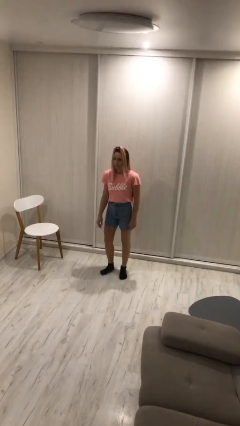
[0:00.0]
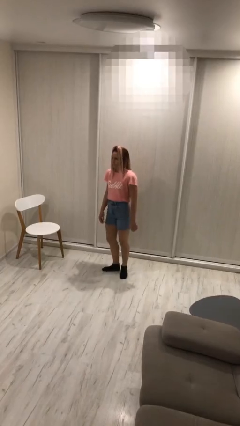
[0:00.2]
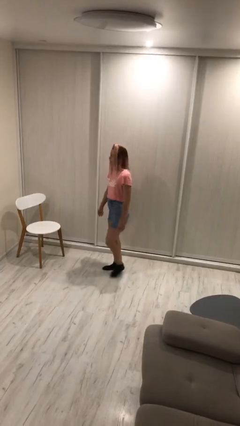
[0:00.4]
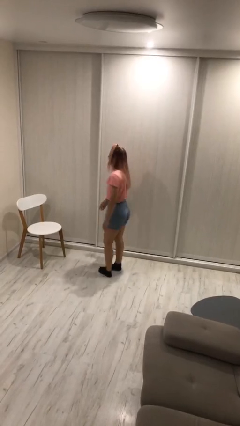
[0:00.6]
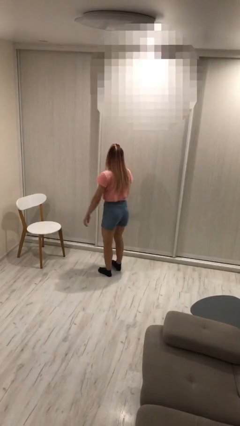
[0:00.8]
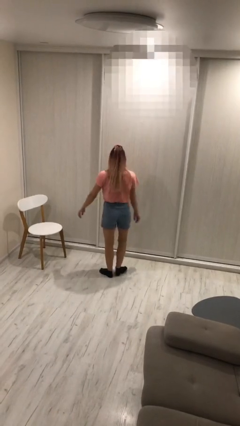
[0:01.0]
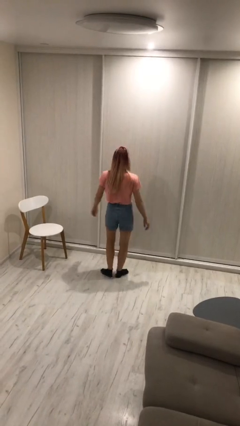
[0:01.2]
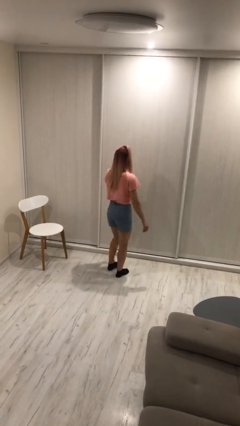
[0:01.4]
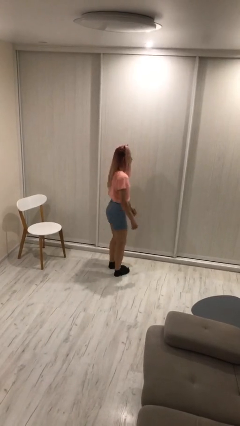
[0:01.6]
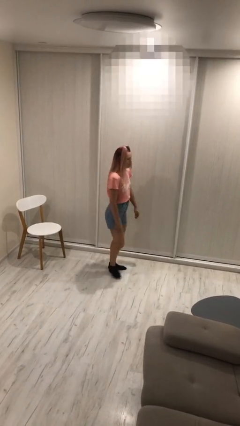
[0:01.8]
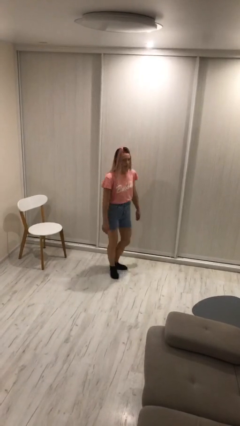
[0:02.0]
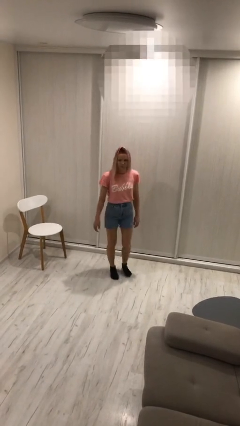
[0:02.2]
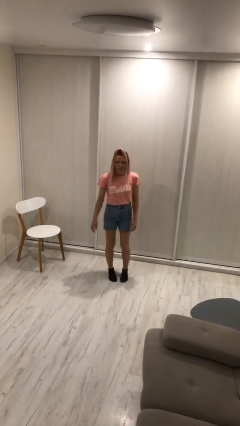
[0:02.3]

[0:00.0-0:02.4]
person twirls

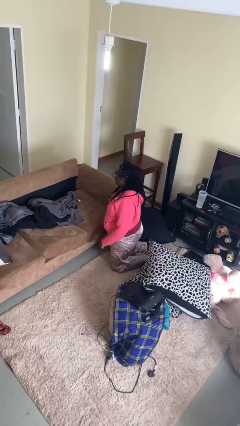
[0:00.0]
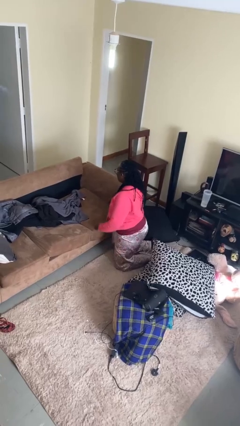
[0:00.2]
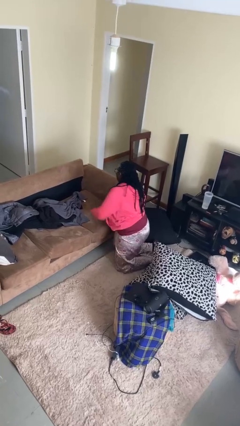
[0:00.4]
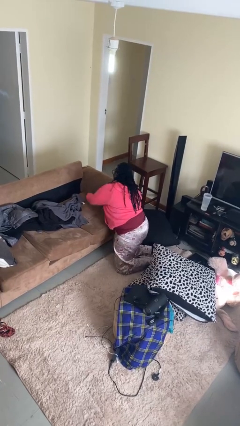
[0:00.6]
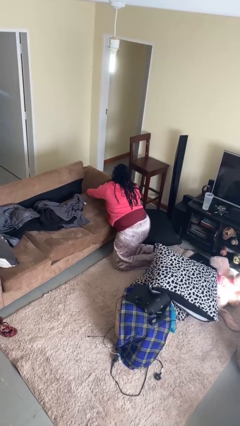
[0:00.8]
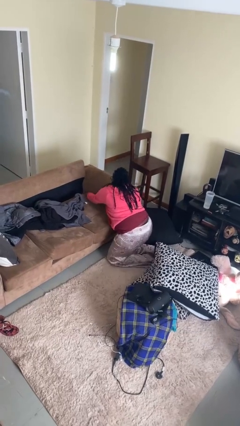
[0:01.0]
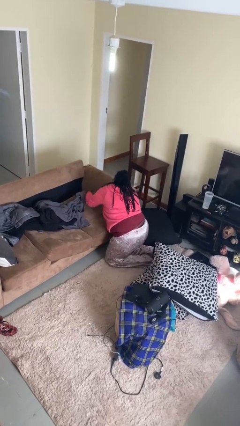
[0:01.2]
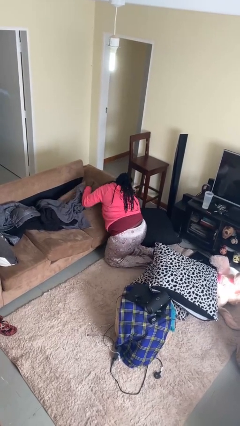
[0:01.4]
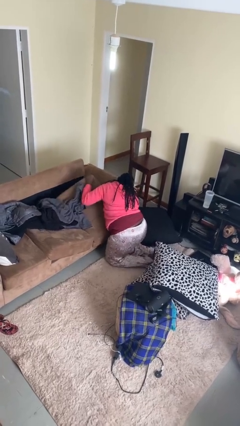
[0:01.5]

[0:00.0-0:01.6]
person searches under couch

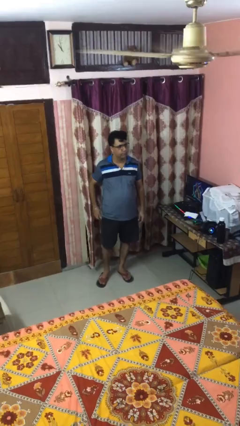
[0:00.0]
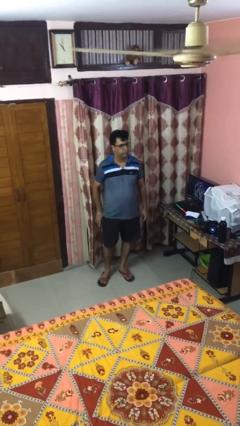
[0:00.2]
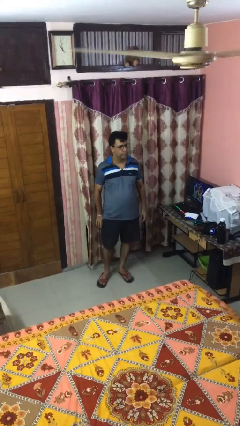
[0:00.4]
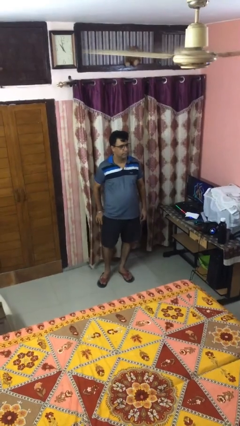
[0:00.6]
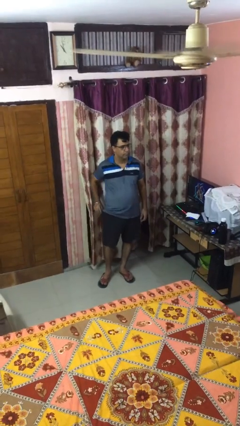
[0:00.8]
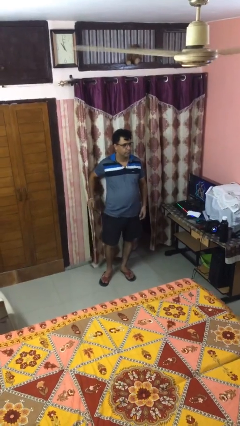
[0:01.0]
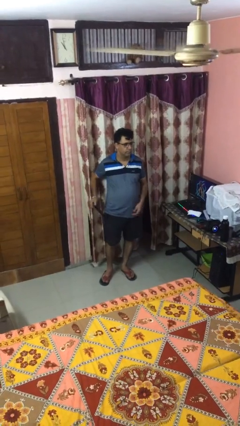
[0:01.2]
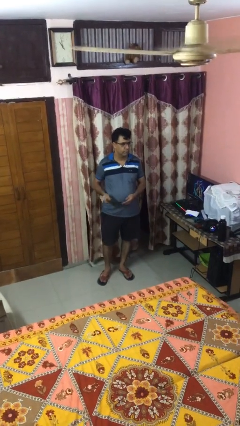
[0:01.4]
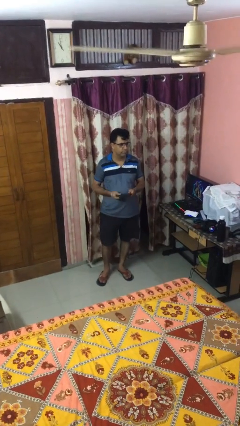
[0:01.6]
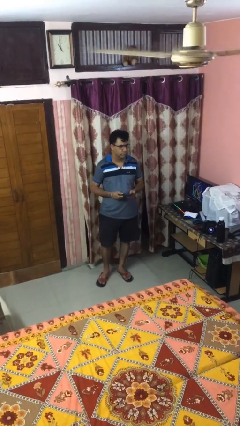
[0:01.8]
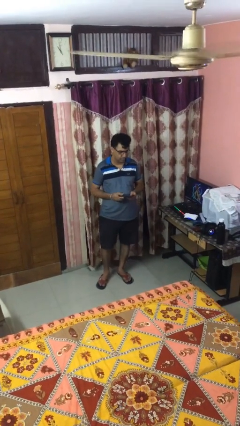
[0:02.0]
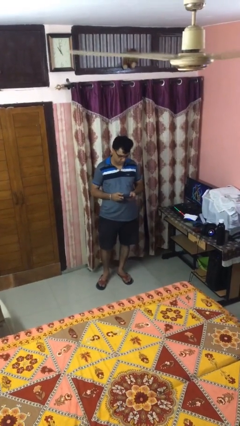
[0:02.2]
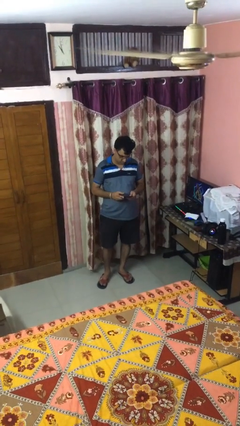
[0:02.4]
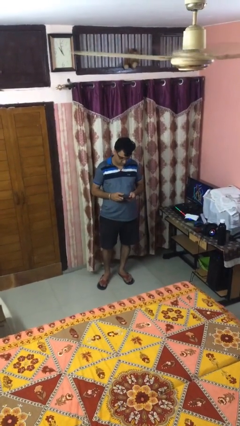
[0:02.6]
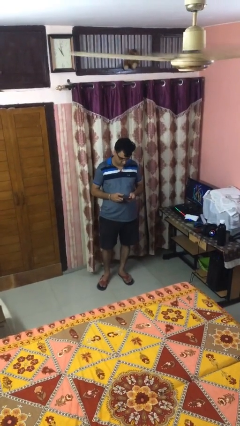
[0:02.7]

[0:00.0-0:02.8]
person takes phone from pocket

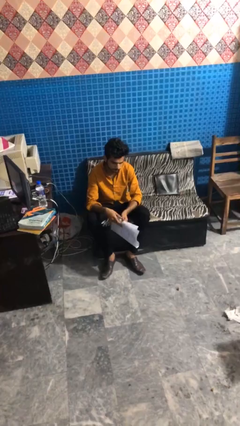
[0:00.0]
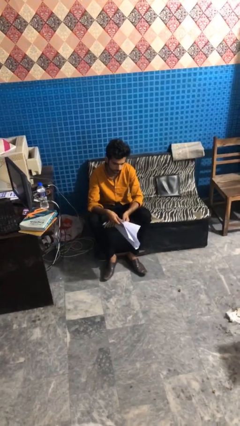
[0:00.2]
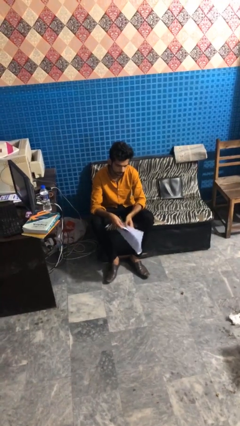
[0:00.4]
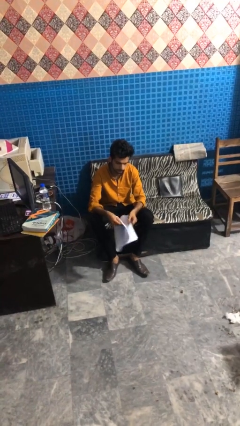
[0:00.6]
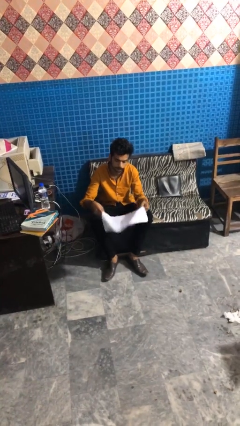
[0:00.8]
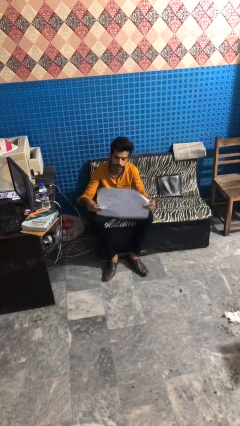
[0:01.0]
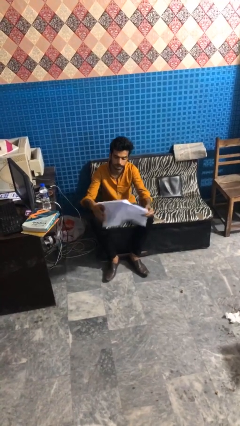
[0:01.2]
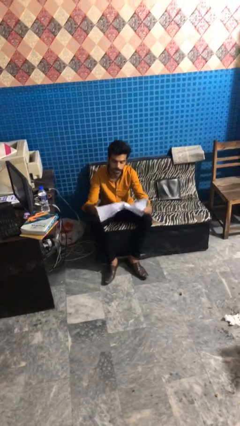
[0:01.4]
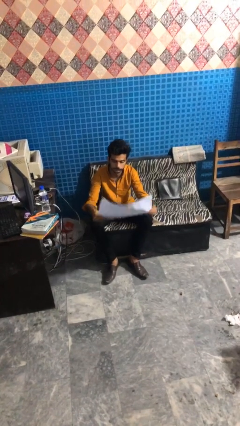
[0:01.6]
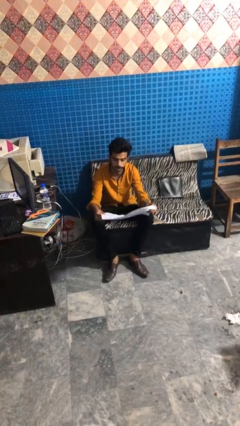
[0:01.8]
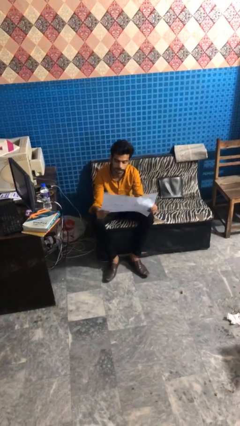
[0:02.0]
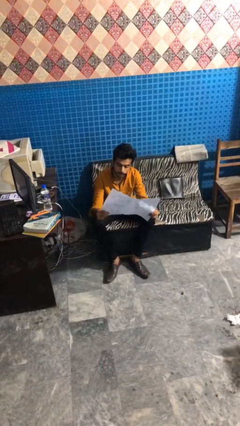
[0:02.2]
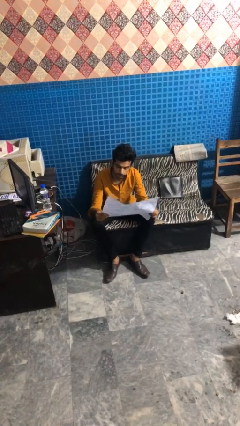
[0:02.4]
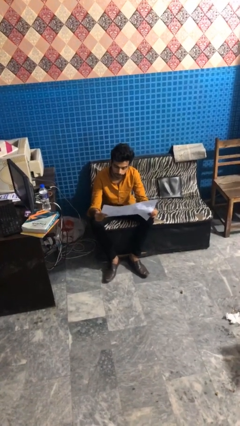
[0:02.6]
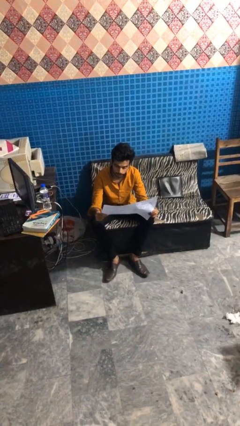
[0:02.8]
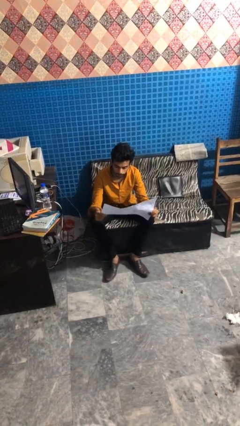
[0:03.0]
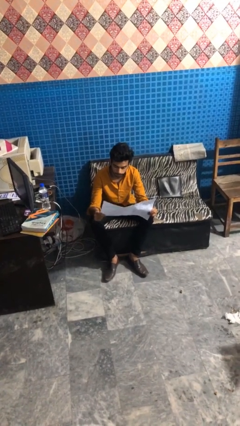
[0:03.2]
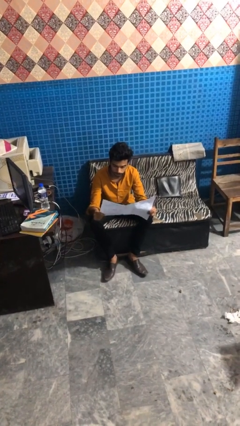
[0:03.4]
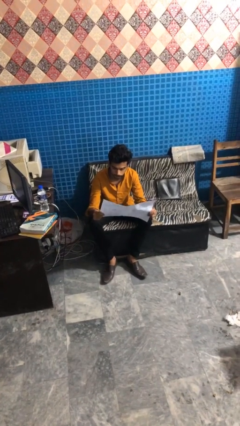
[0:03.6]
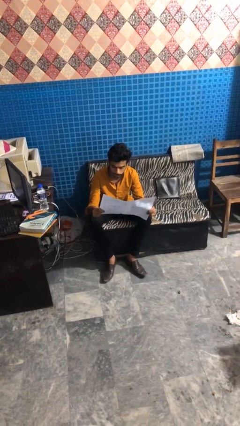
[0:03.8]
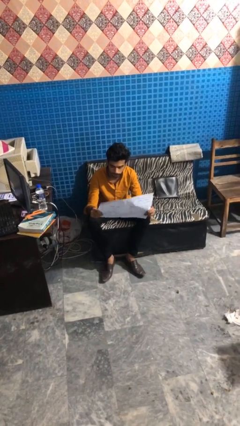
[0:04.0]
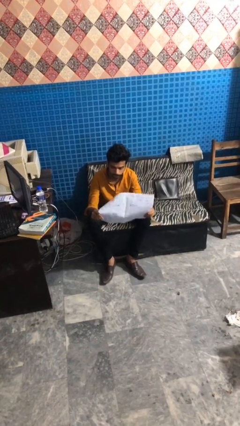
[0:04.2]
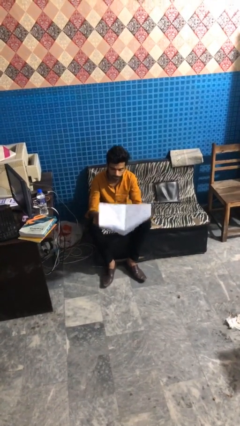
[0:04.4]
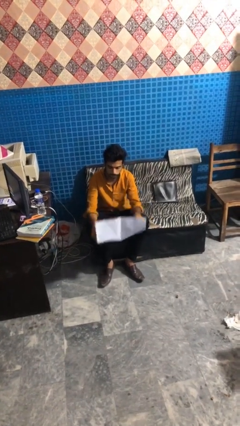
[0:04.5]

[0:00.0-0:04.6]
person reads newspaper

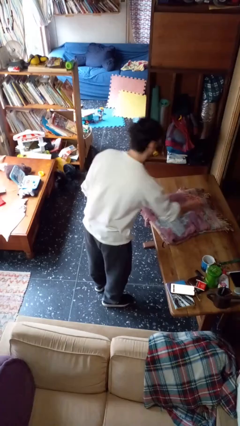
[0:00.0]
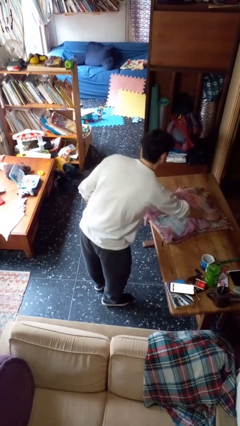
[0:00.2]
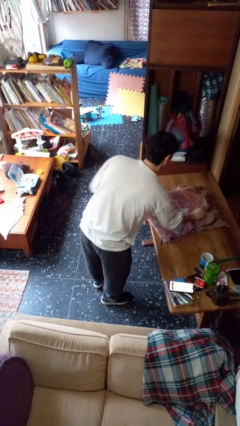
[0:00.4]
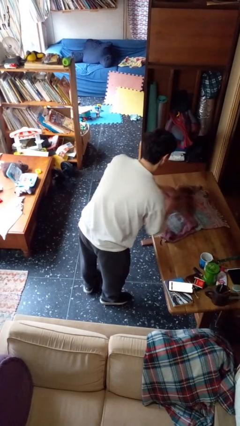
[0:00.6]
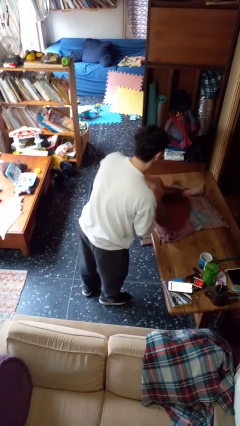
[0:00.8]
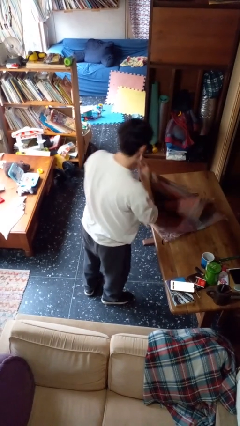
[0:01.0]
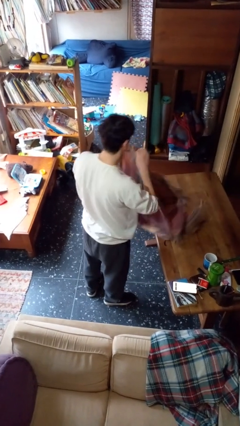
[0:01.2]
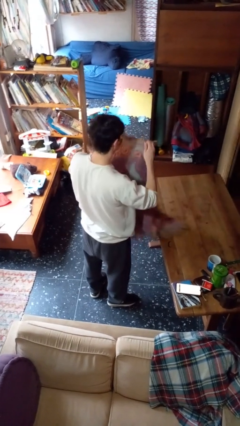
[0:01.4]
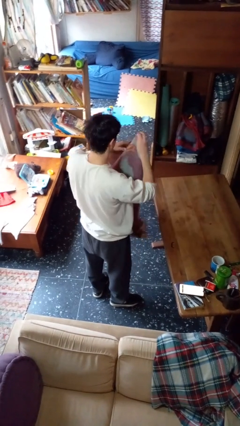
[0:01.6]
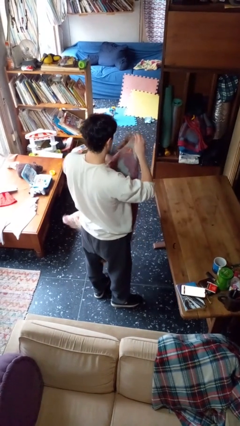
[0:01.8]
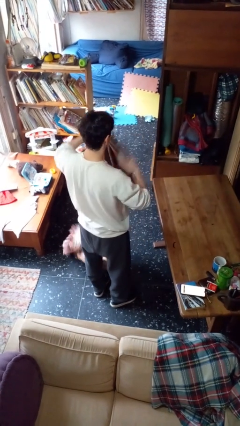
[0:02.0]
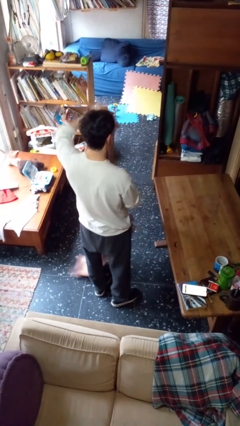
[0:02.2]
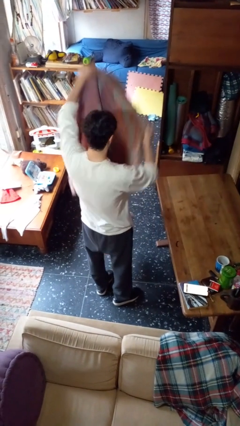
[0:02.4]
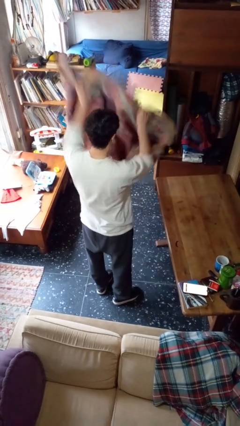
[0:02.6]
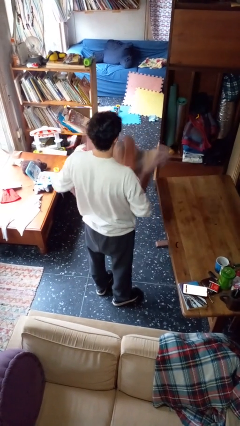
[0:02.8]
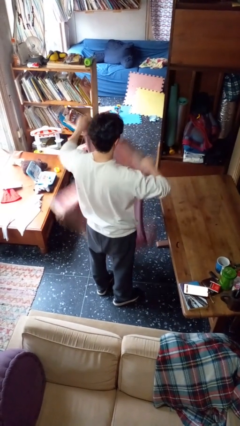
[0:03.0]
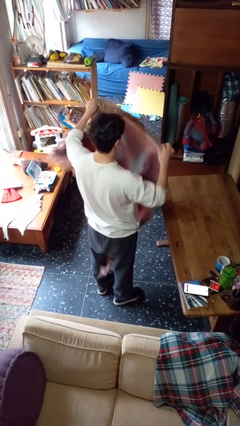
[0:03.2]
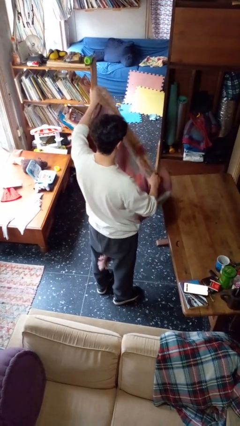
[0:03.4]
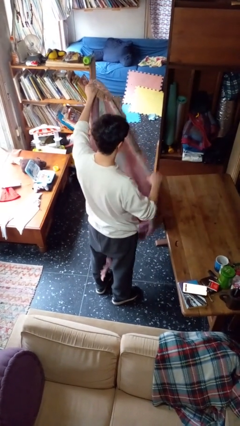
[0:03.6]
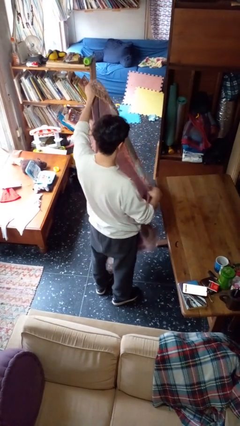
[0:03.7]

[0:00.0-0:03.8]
person unfolds blanket

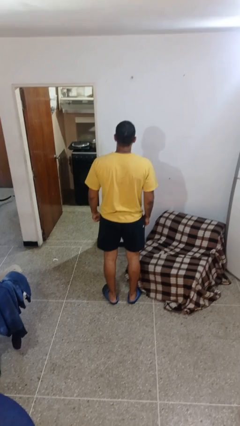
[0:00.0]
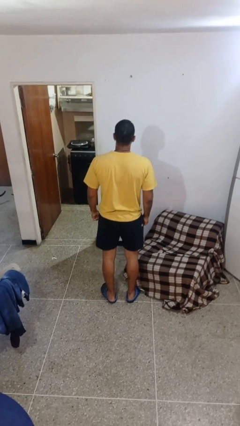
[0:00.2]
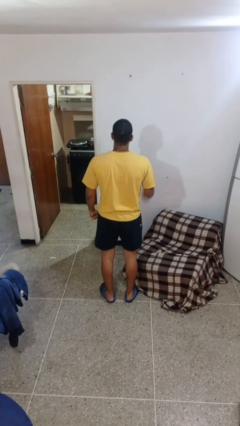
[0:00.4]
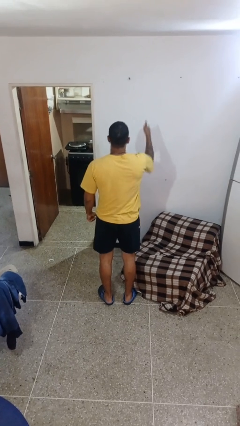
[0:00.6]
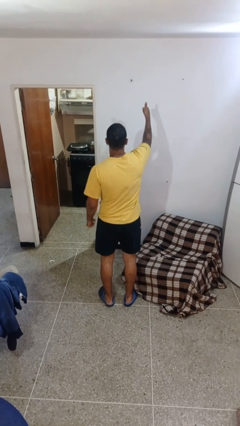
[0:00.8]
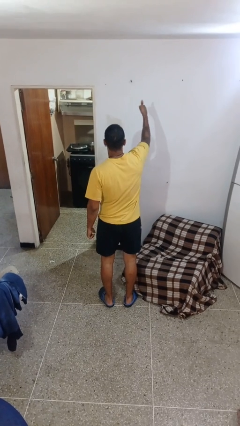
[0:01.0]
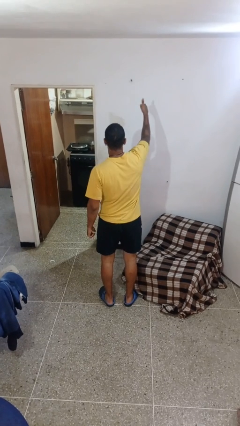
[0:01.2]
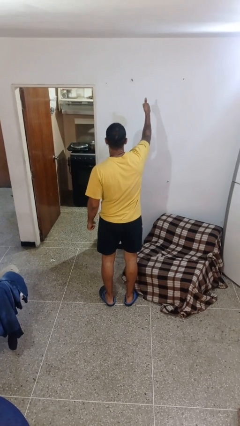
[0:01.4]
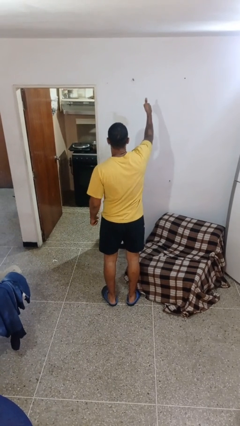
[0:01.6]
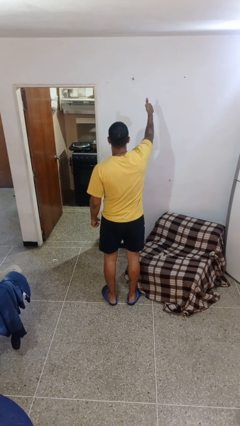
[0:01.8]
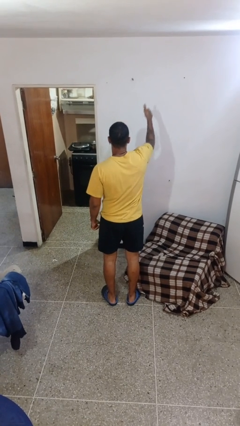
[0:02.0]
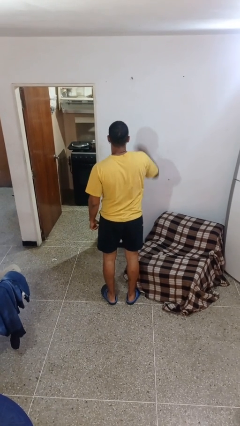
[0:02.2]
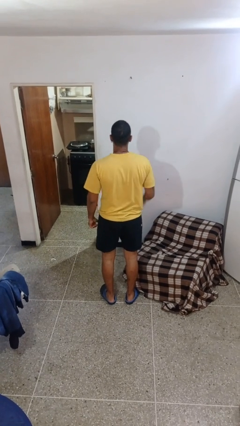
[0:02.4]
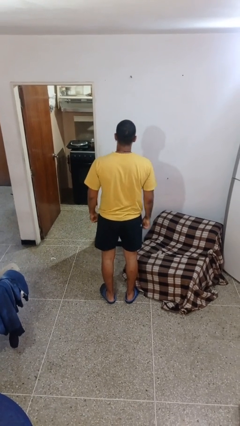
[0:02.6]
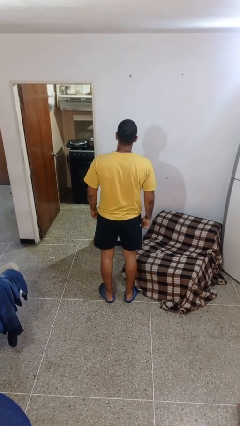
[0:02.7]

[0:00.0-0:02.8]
person gestures thumbs up
